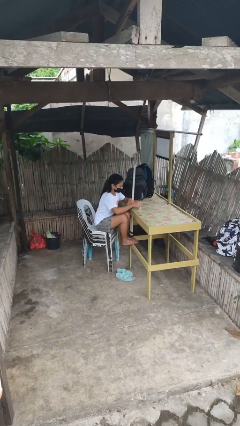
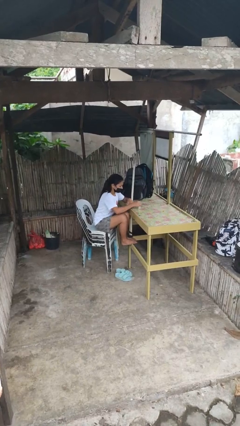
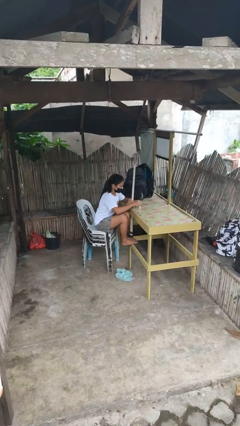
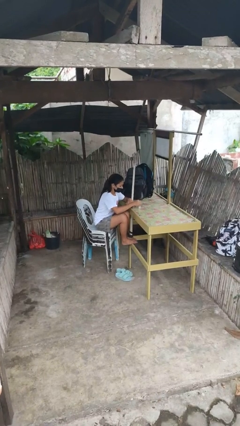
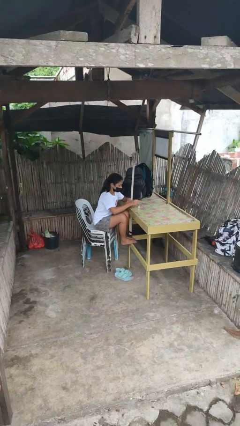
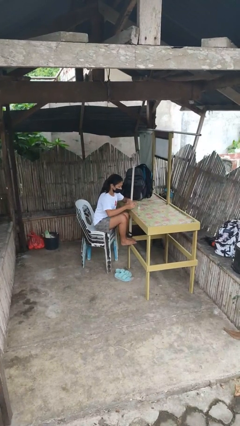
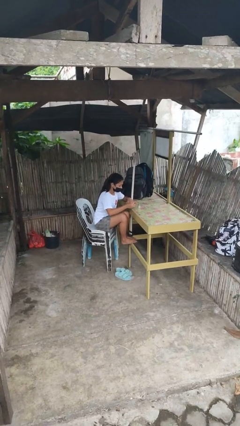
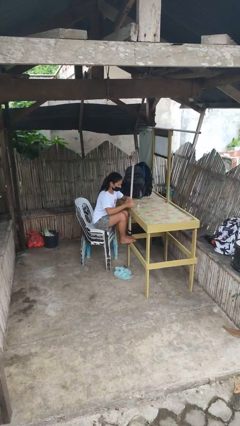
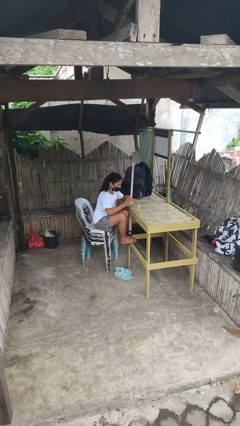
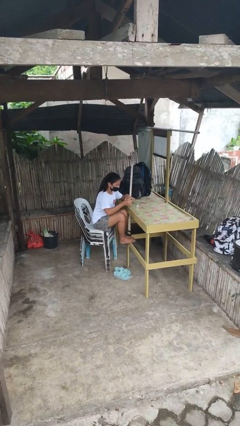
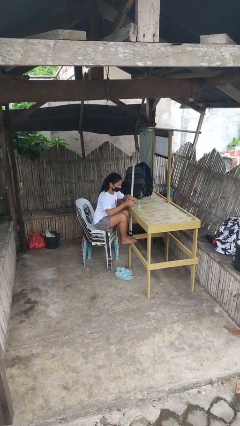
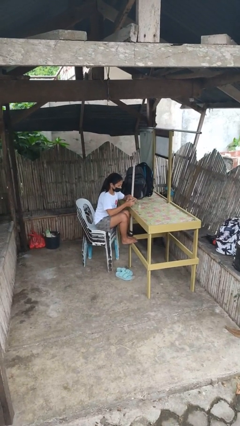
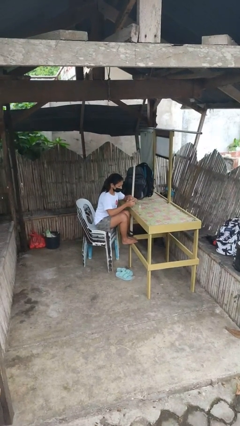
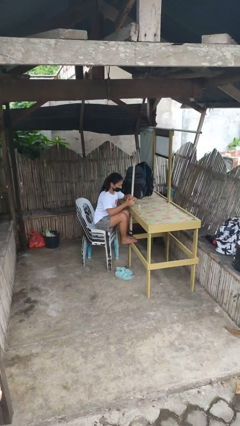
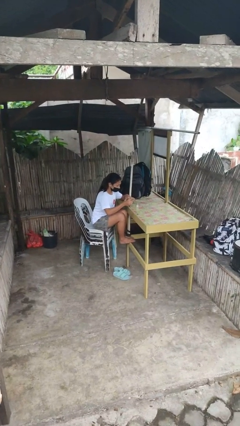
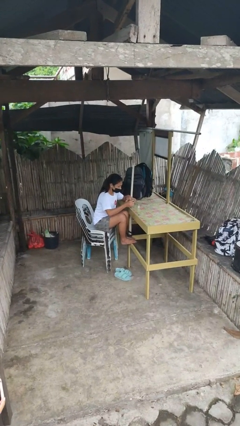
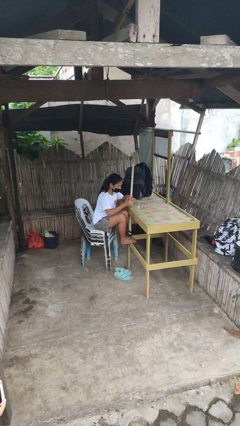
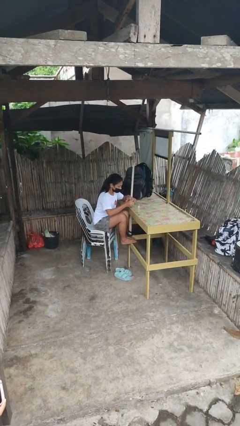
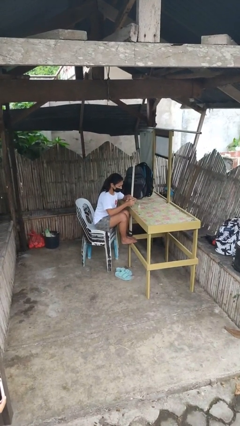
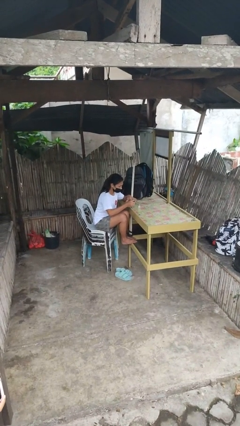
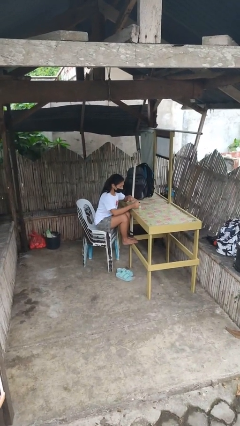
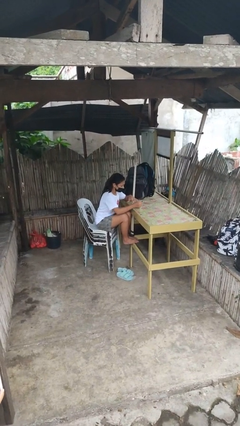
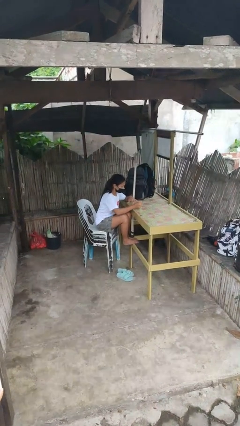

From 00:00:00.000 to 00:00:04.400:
person paints fingernails

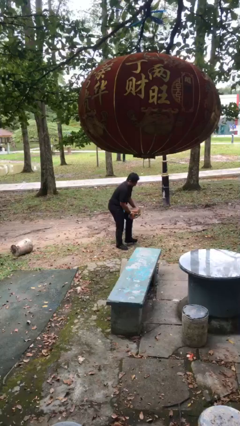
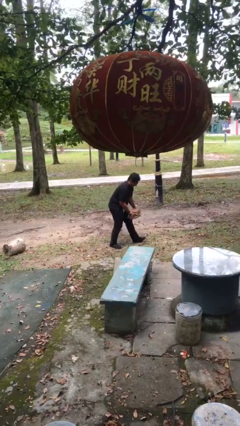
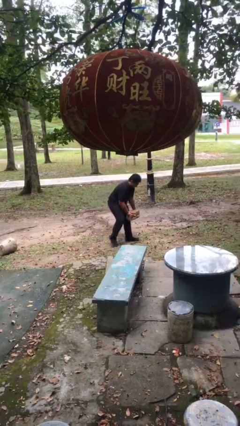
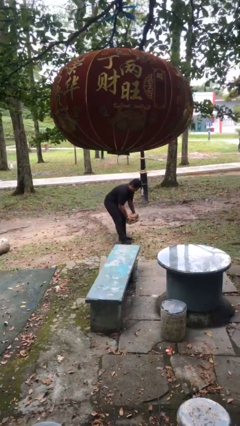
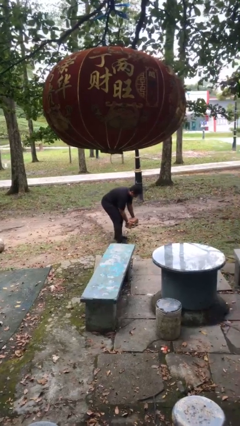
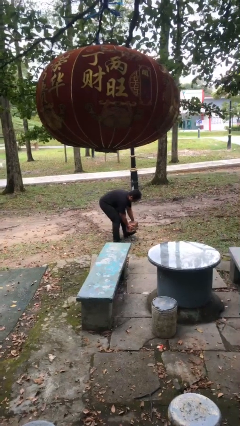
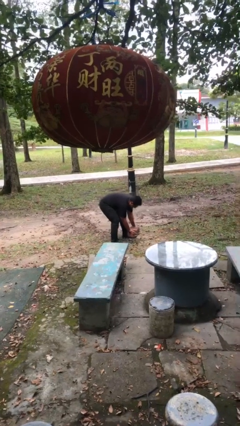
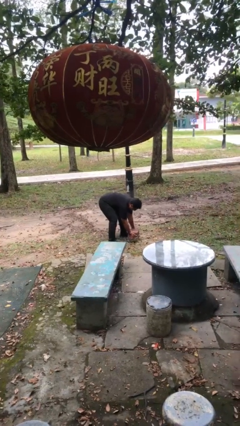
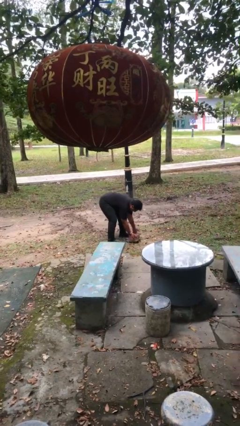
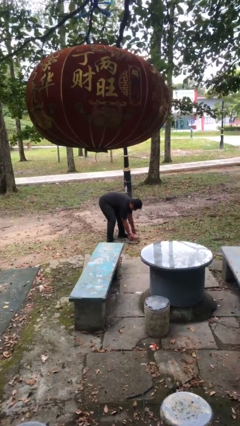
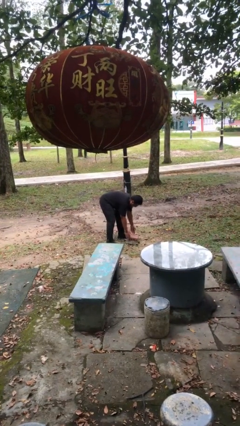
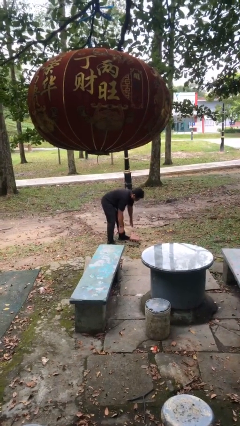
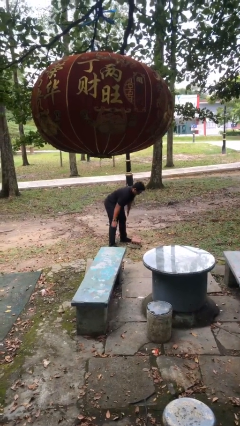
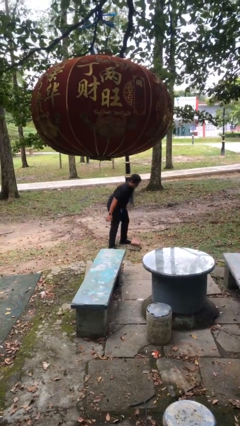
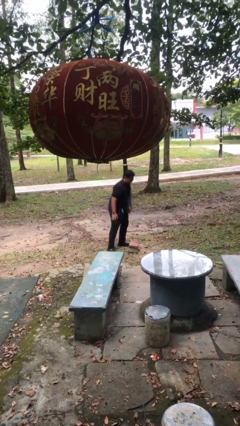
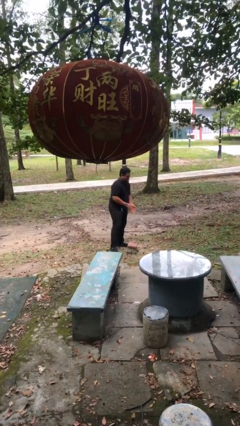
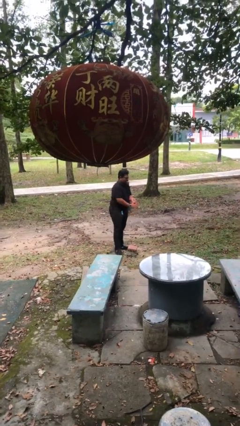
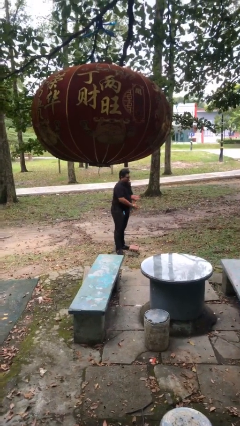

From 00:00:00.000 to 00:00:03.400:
person puts down object on floor

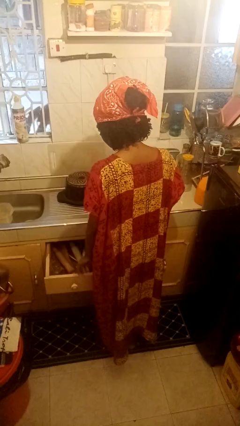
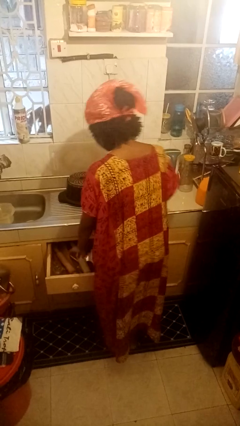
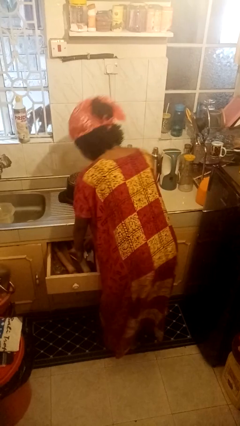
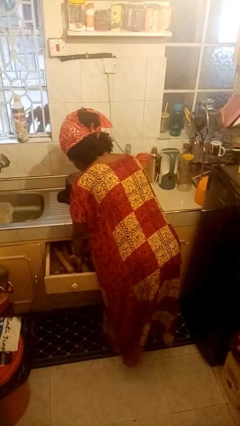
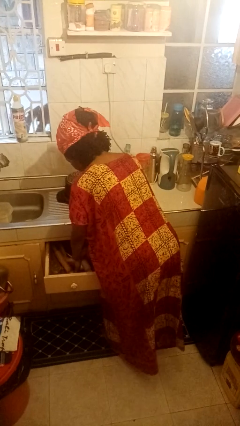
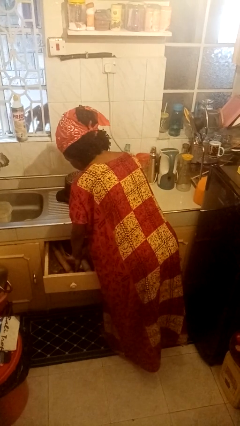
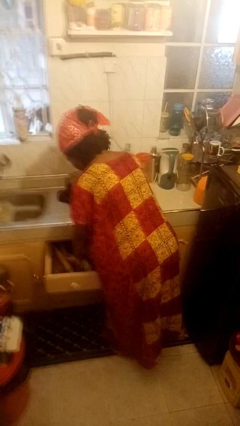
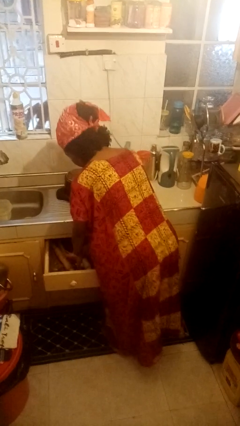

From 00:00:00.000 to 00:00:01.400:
person searches in kitchen drawer

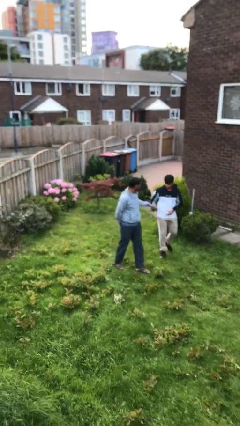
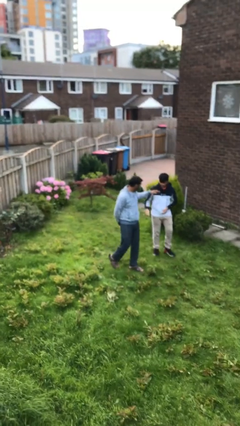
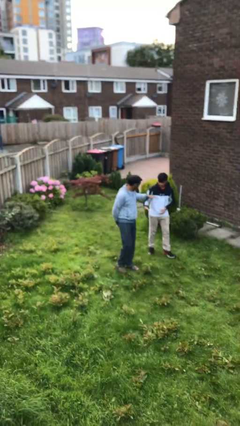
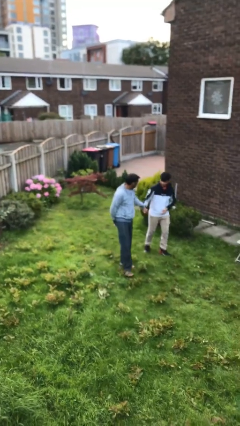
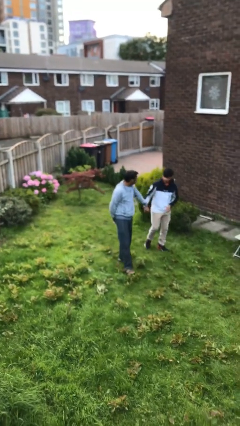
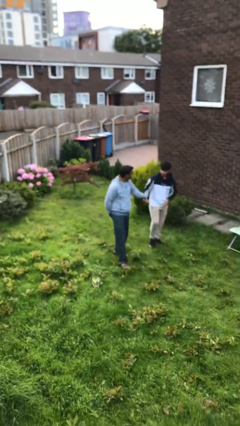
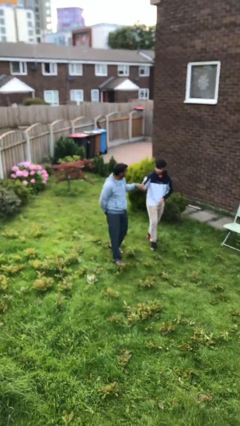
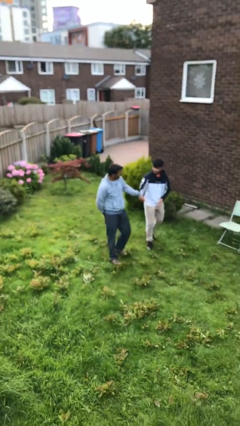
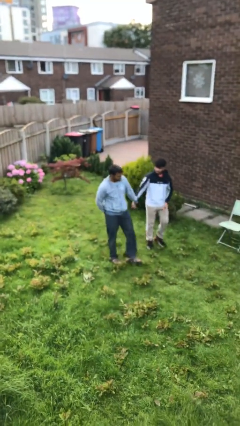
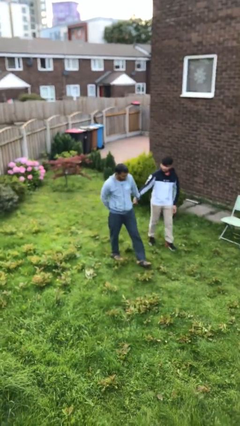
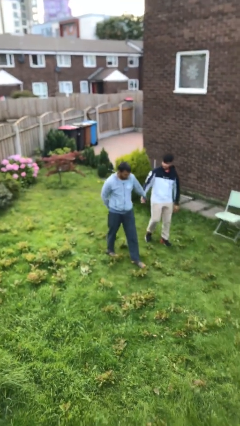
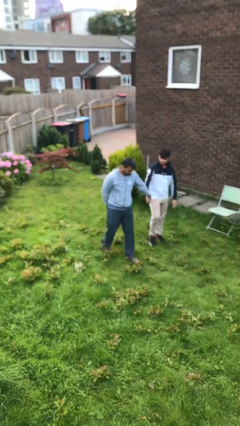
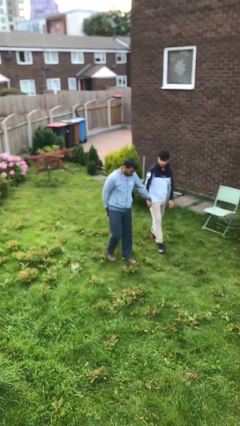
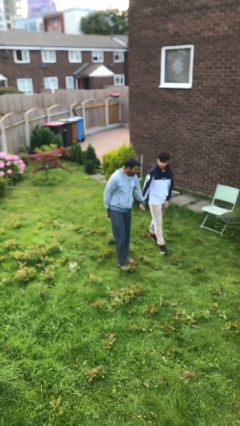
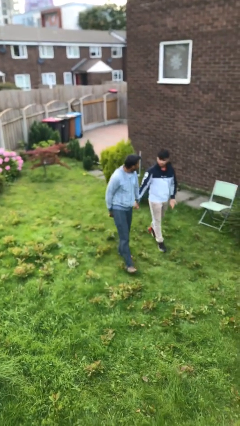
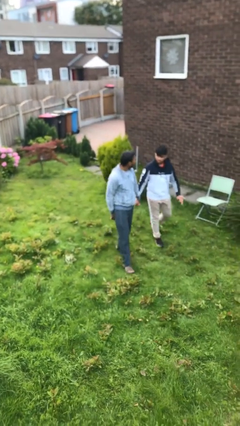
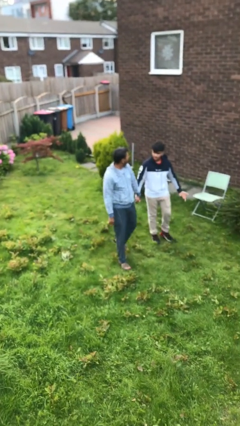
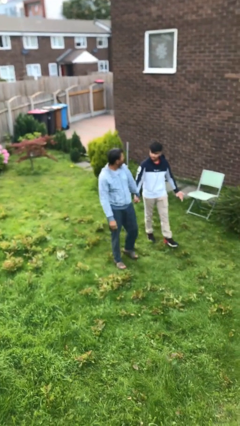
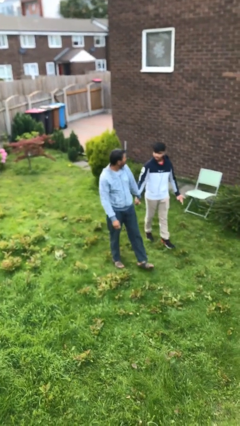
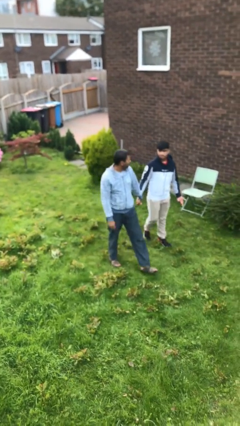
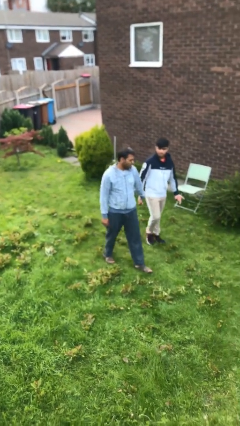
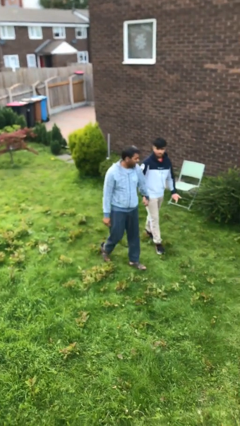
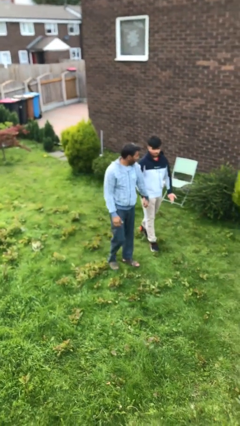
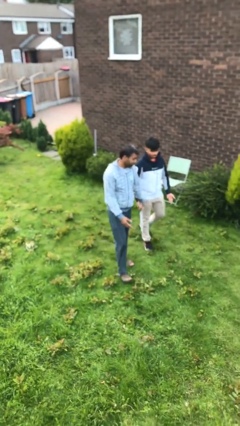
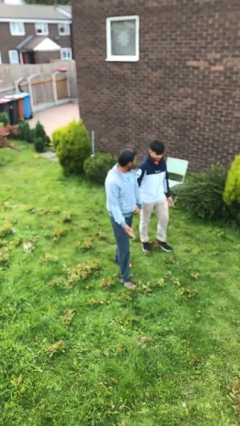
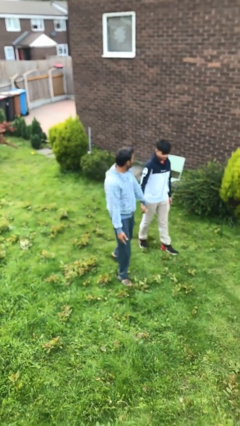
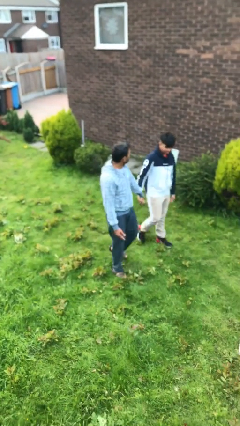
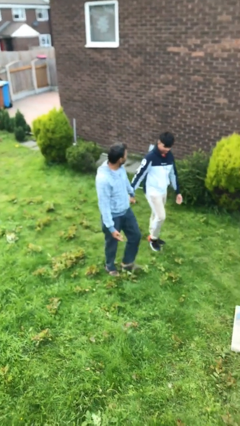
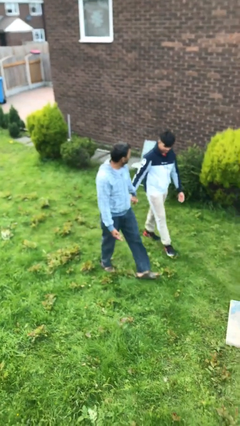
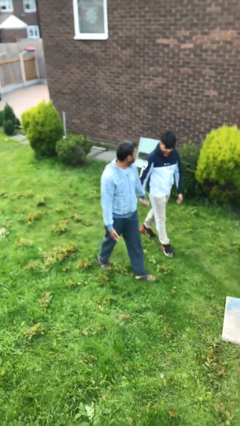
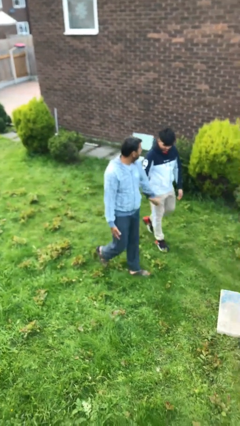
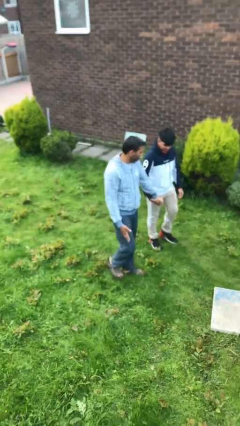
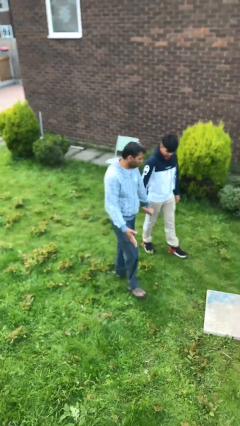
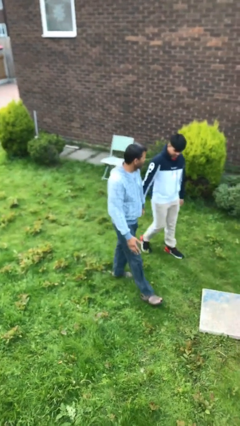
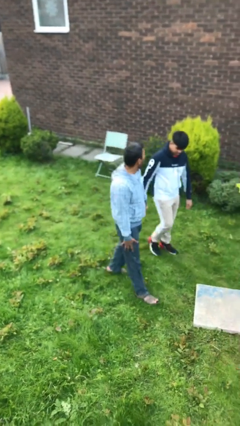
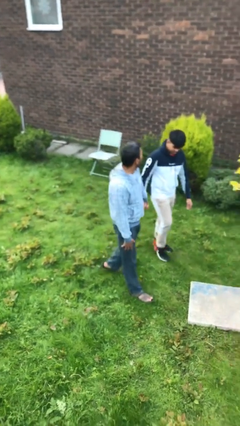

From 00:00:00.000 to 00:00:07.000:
person holds hand

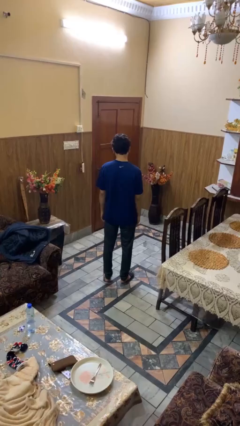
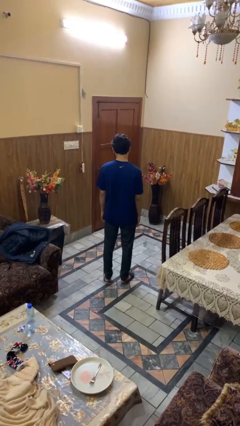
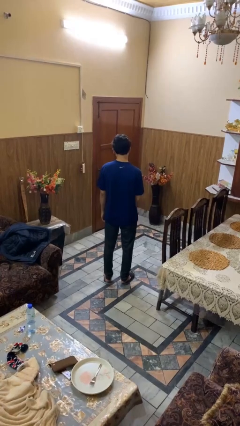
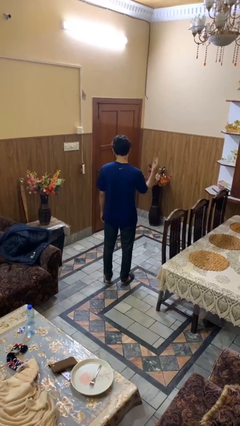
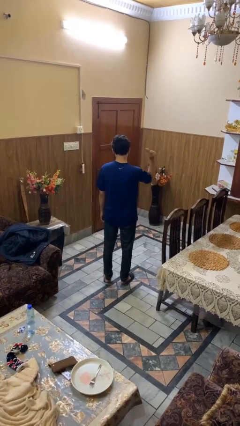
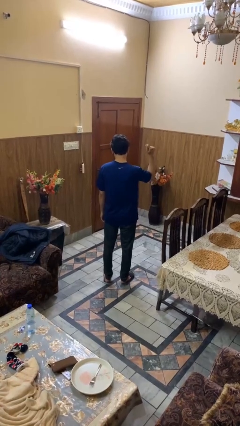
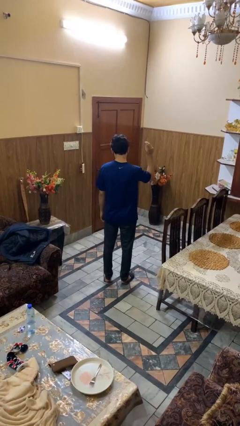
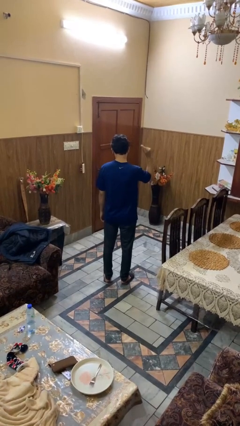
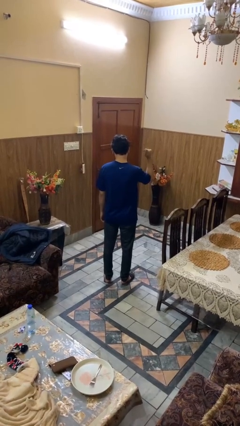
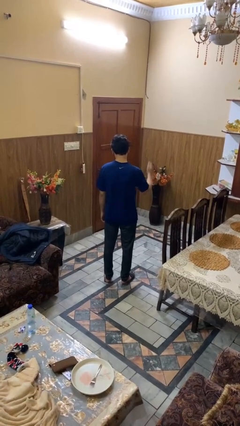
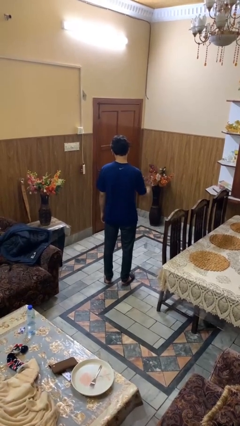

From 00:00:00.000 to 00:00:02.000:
person snaps fingers
